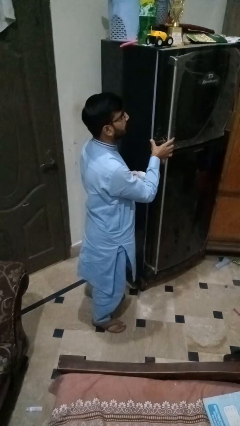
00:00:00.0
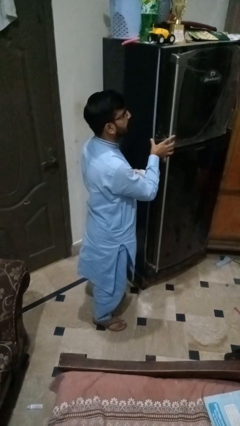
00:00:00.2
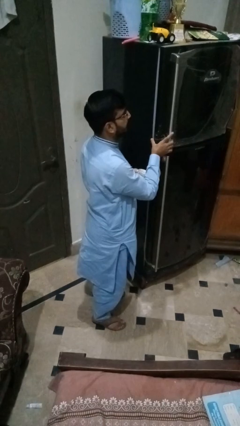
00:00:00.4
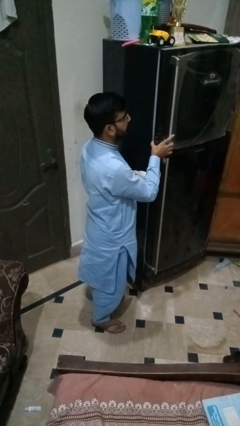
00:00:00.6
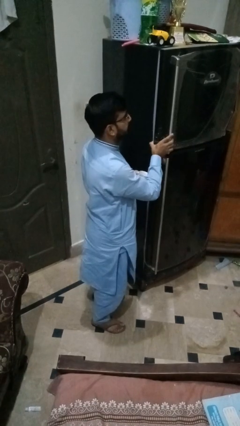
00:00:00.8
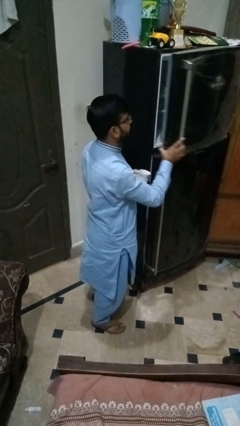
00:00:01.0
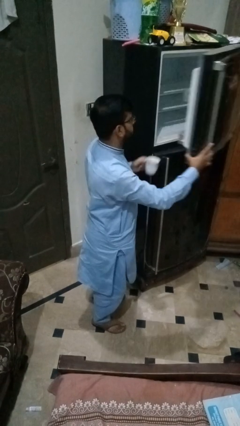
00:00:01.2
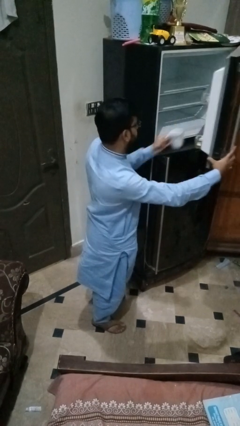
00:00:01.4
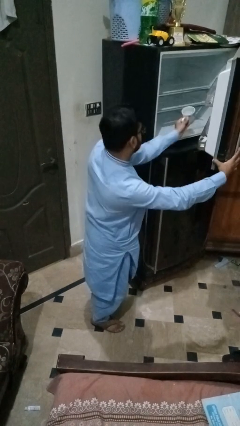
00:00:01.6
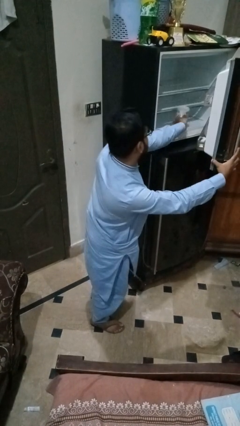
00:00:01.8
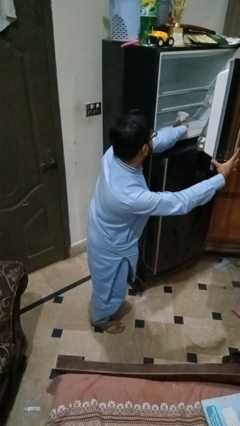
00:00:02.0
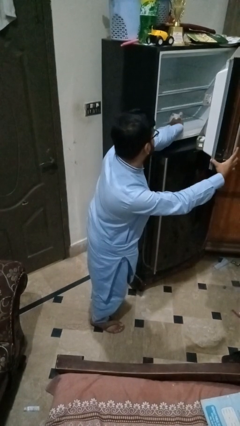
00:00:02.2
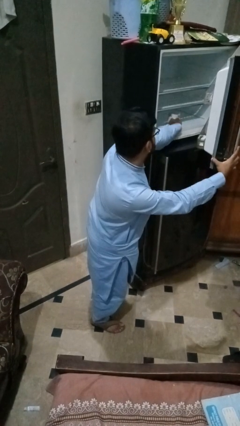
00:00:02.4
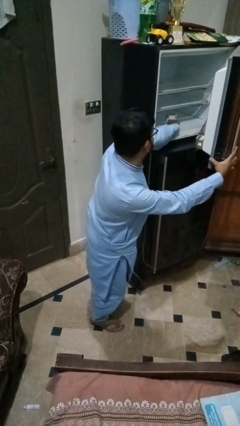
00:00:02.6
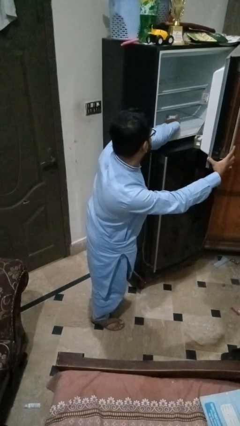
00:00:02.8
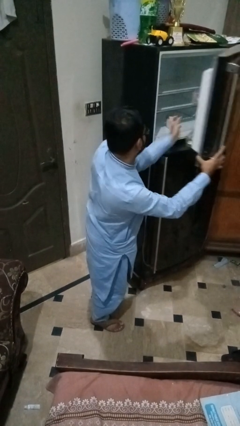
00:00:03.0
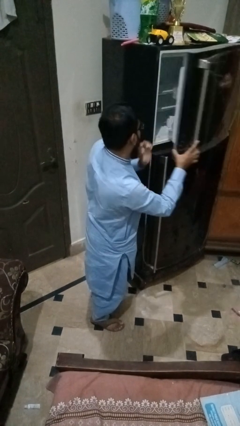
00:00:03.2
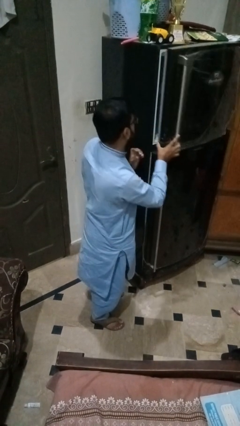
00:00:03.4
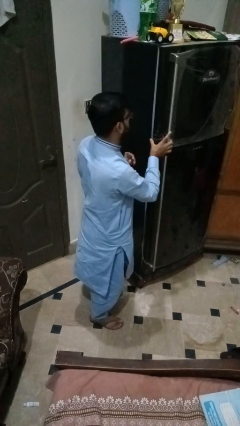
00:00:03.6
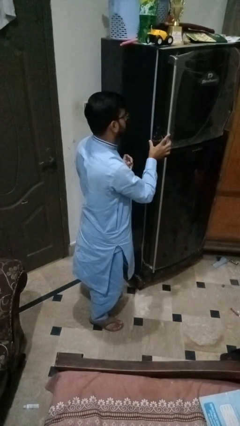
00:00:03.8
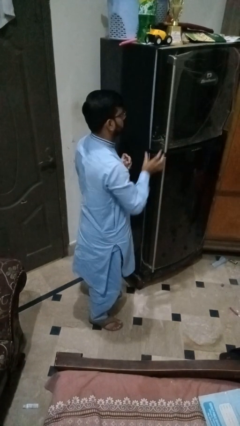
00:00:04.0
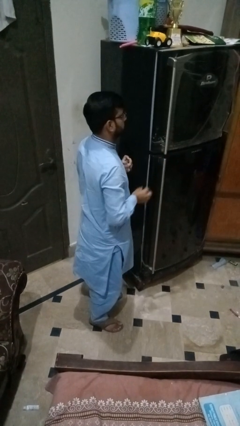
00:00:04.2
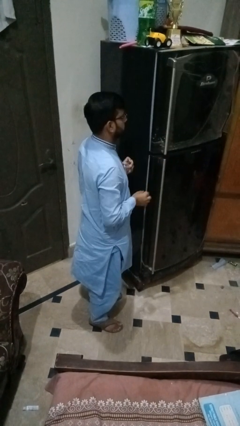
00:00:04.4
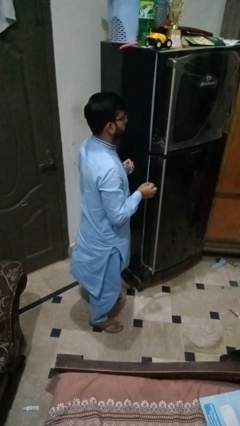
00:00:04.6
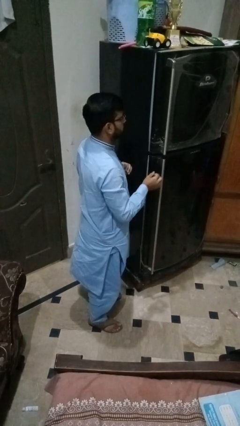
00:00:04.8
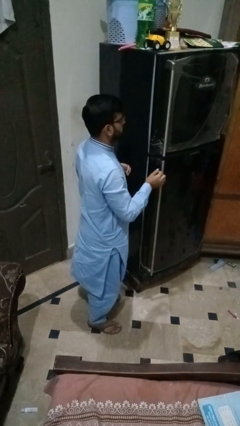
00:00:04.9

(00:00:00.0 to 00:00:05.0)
person puts object into refrigerator

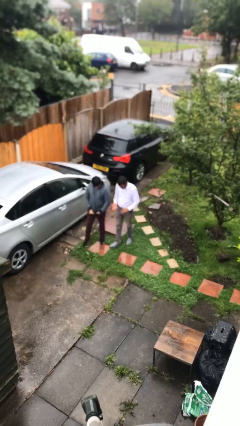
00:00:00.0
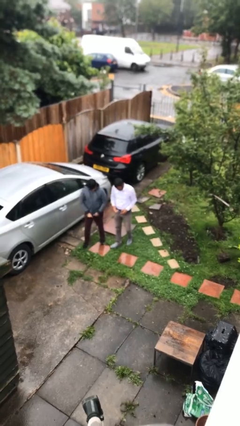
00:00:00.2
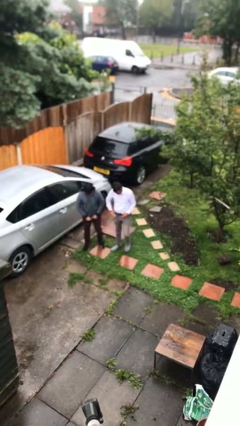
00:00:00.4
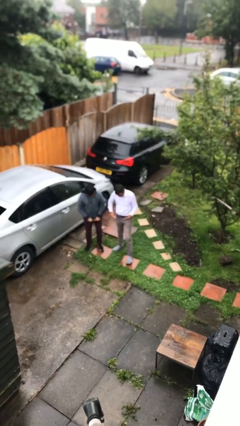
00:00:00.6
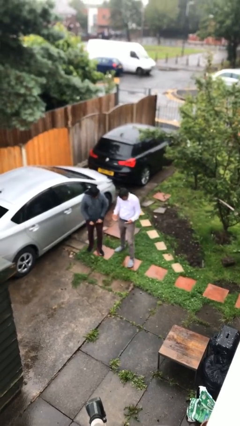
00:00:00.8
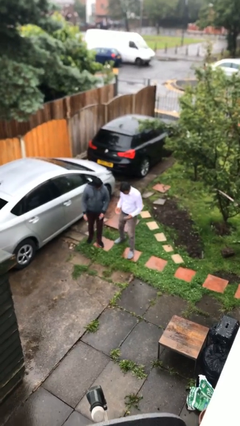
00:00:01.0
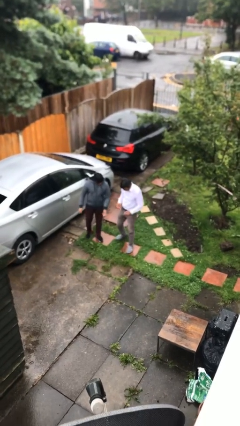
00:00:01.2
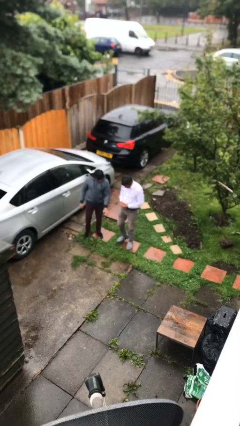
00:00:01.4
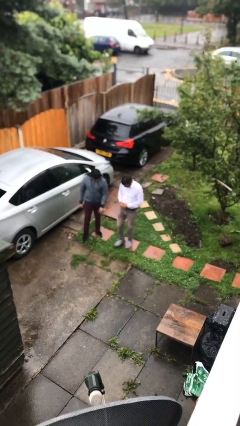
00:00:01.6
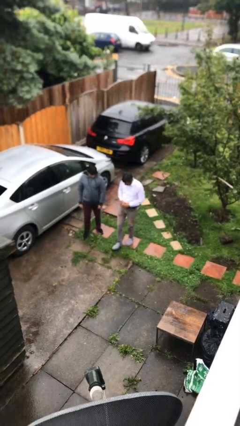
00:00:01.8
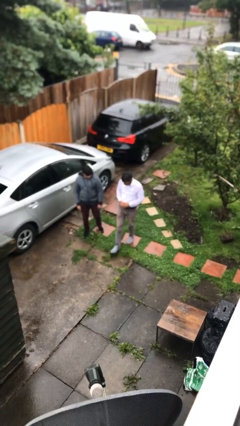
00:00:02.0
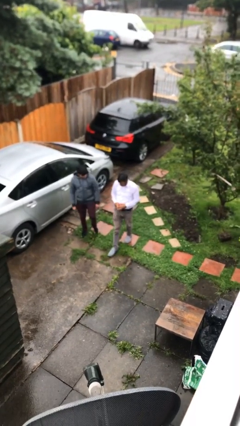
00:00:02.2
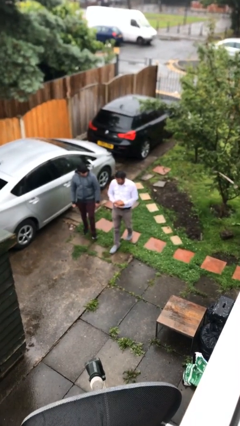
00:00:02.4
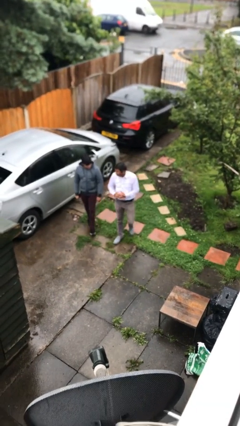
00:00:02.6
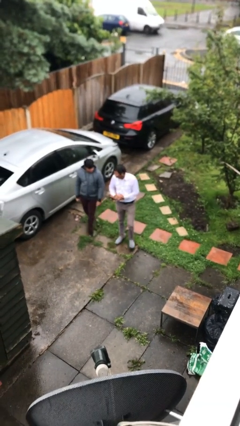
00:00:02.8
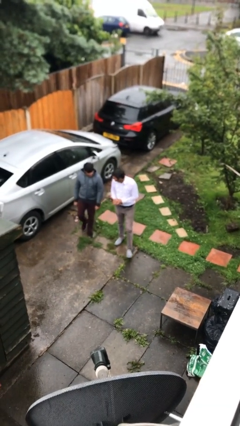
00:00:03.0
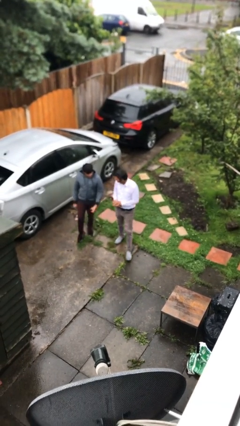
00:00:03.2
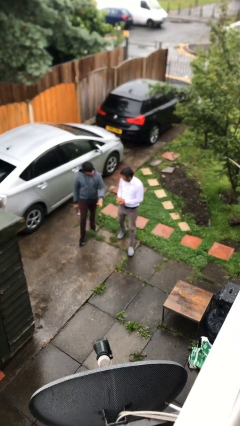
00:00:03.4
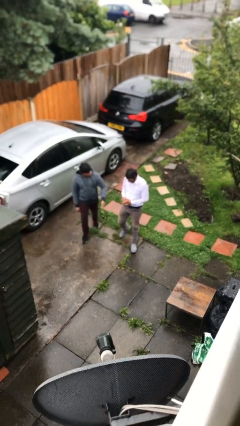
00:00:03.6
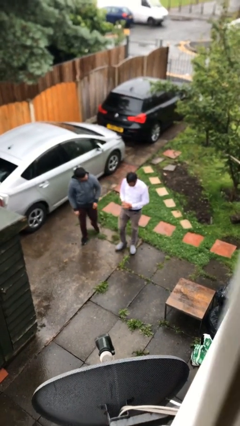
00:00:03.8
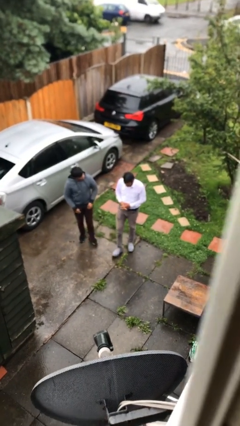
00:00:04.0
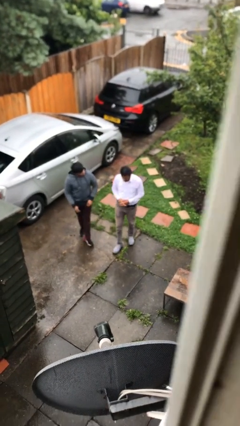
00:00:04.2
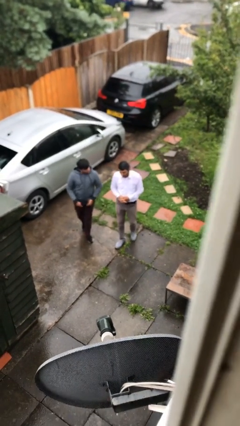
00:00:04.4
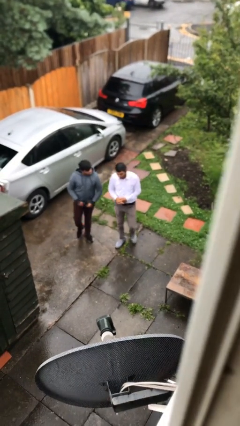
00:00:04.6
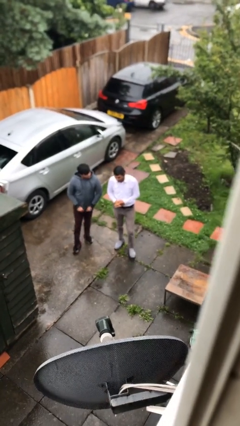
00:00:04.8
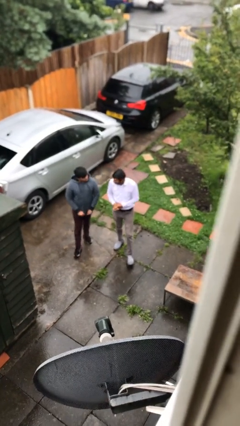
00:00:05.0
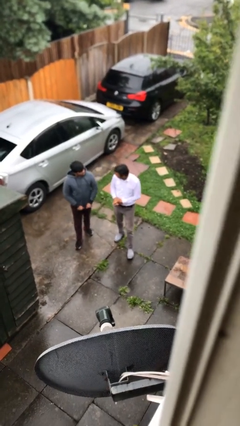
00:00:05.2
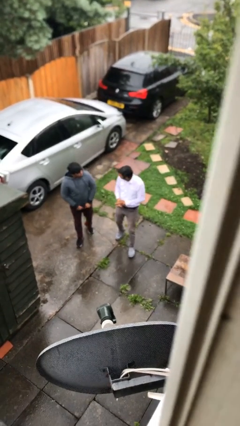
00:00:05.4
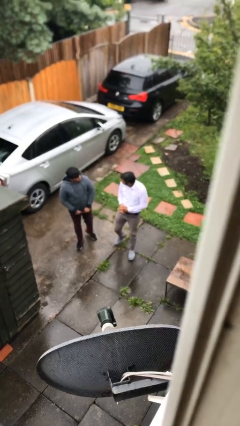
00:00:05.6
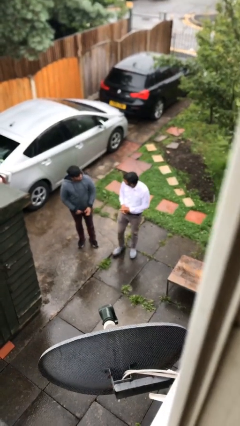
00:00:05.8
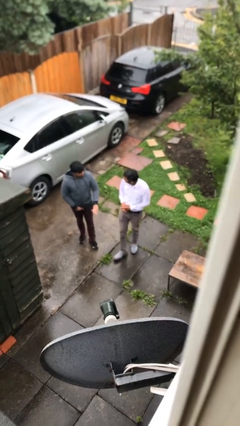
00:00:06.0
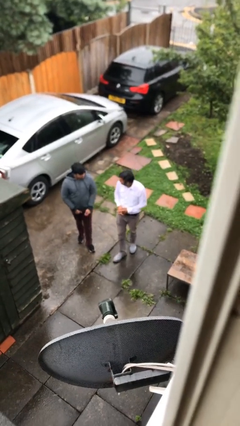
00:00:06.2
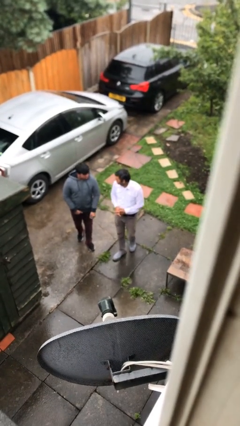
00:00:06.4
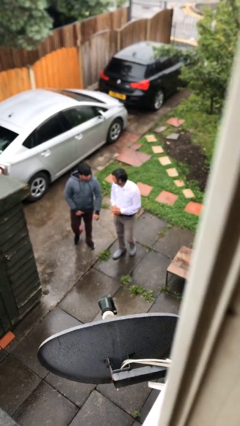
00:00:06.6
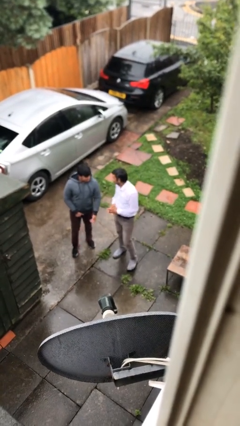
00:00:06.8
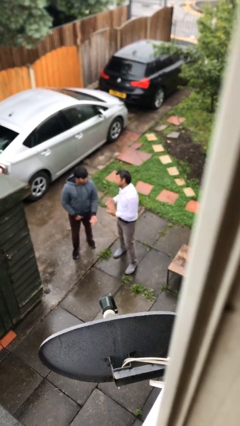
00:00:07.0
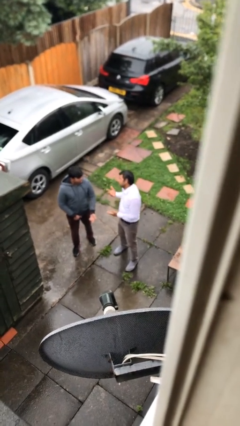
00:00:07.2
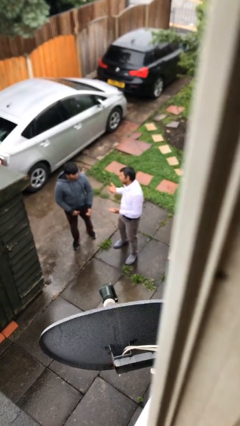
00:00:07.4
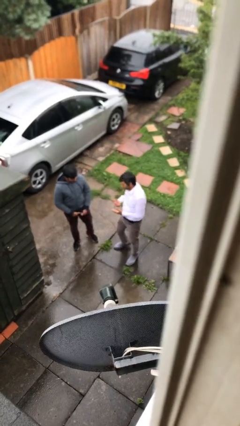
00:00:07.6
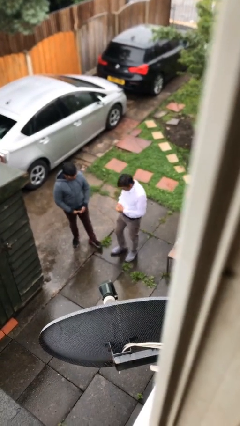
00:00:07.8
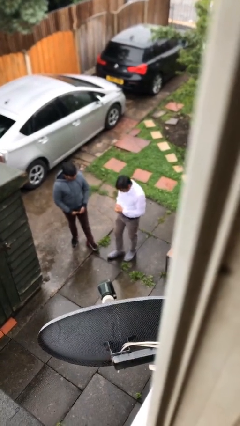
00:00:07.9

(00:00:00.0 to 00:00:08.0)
person talks to person

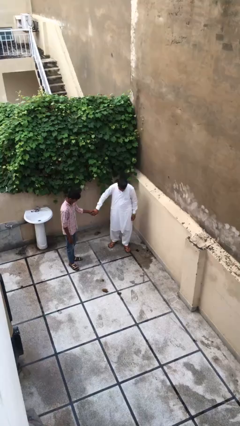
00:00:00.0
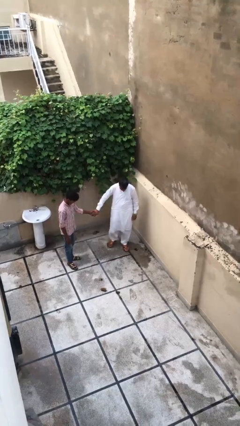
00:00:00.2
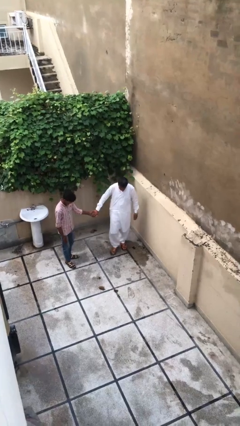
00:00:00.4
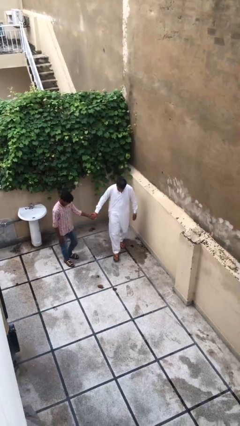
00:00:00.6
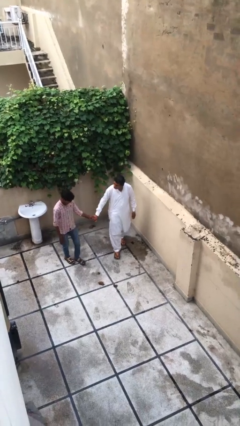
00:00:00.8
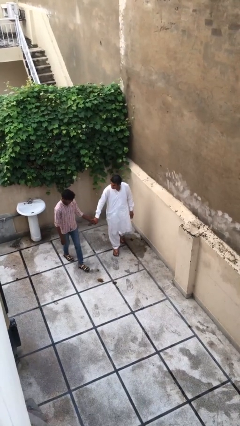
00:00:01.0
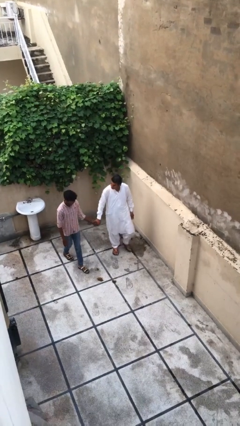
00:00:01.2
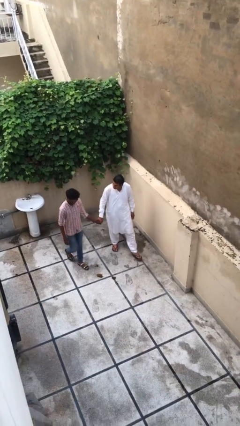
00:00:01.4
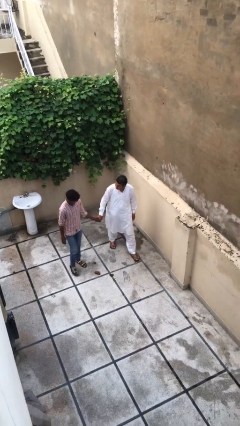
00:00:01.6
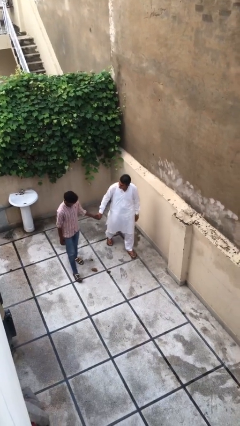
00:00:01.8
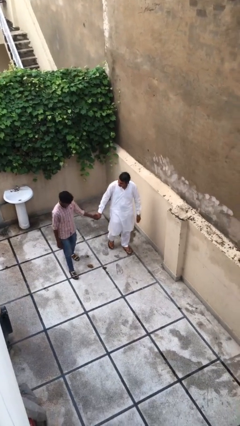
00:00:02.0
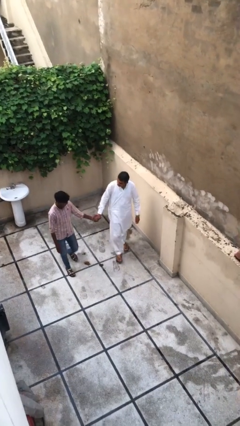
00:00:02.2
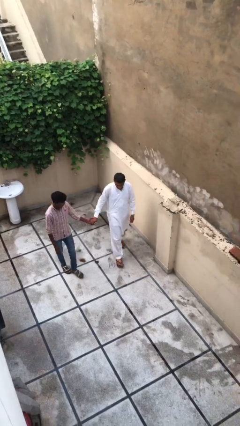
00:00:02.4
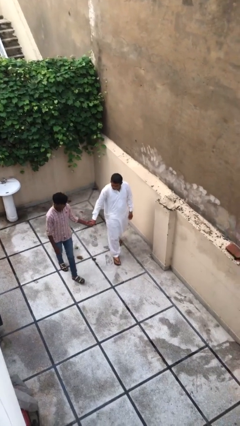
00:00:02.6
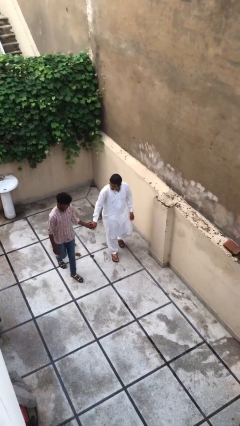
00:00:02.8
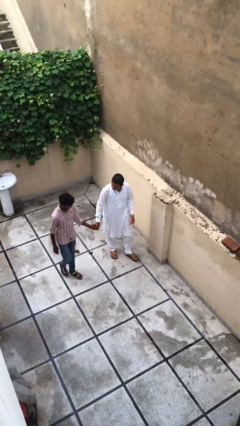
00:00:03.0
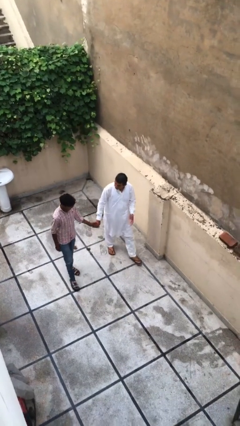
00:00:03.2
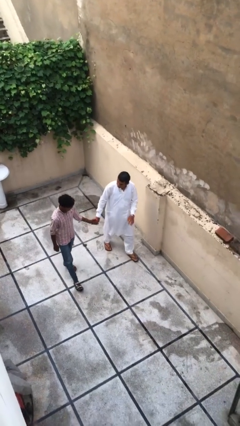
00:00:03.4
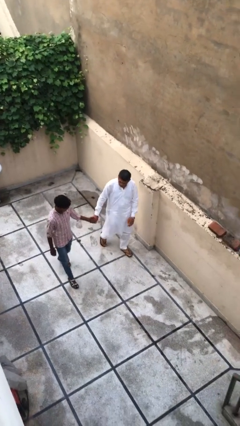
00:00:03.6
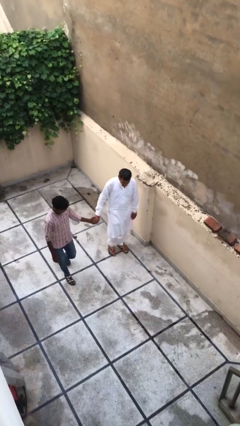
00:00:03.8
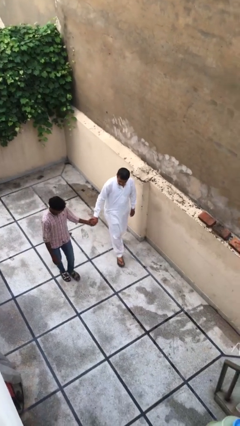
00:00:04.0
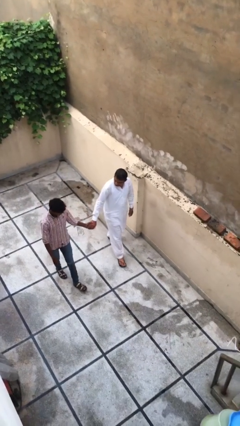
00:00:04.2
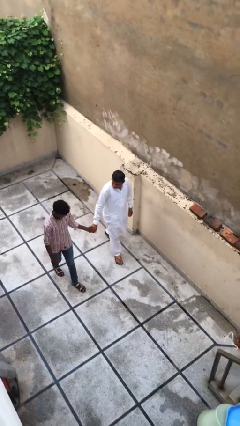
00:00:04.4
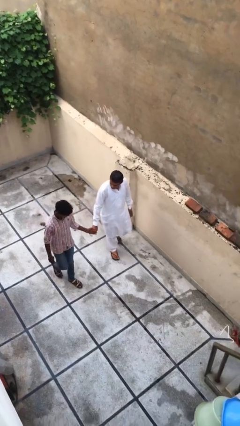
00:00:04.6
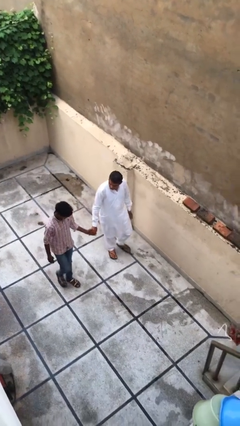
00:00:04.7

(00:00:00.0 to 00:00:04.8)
person holds hand

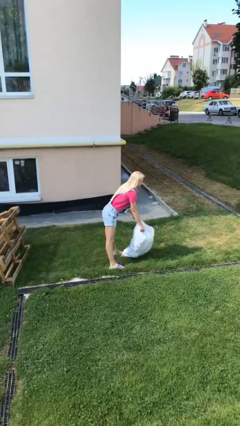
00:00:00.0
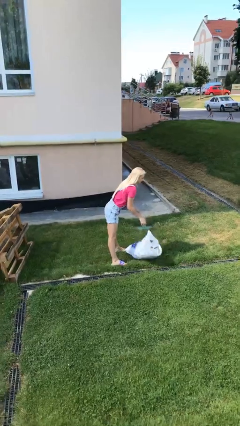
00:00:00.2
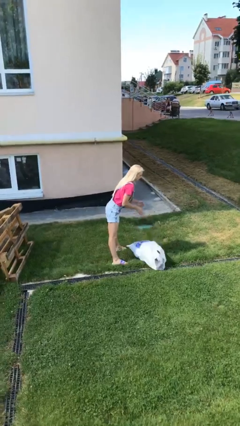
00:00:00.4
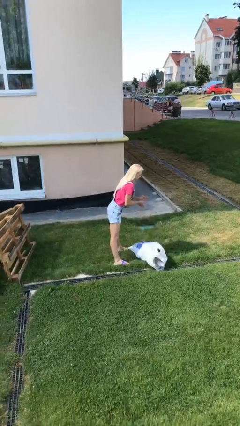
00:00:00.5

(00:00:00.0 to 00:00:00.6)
person puts down object on floor
